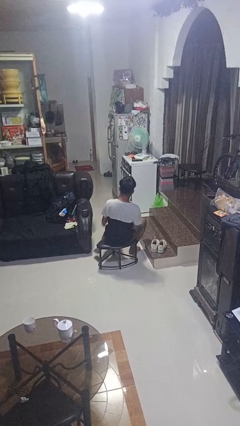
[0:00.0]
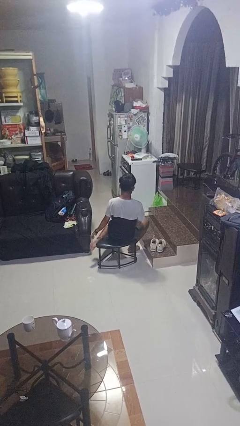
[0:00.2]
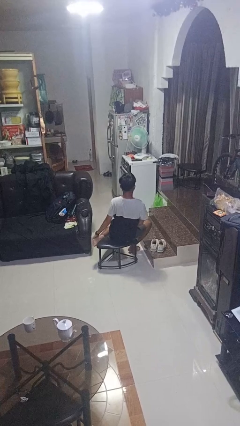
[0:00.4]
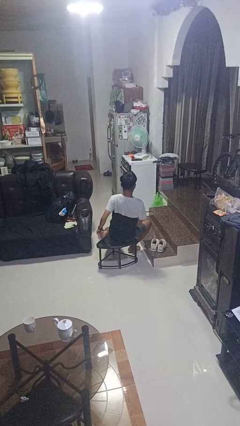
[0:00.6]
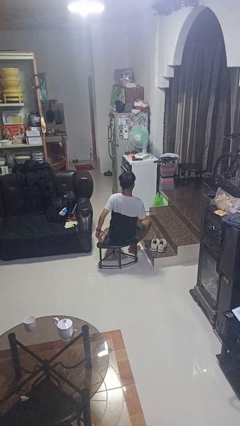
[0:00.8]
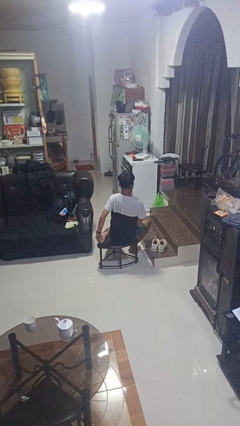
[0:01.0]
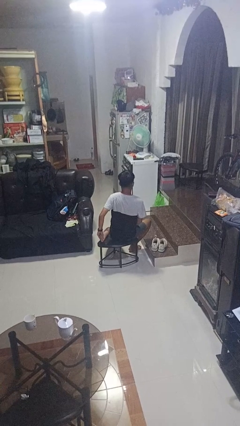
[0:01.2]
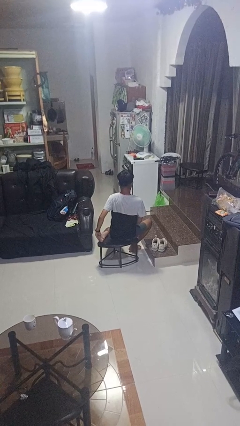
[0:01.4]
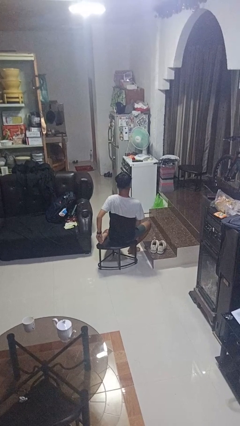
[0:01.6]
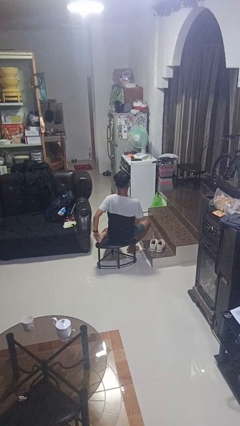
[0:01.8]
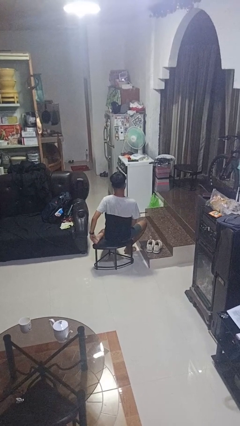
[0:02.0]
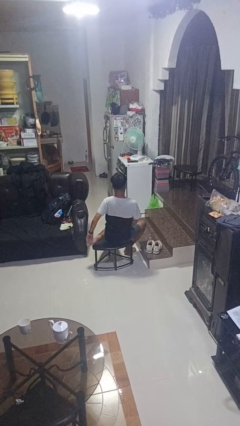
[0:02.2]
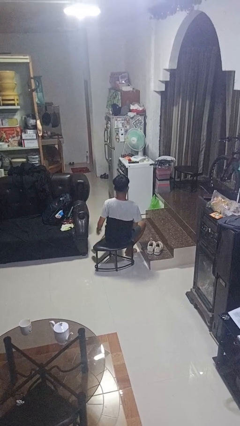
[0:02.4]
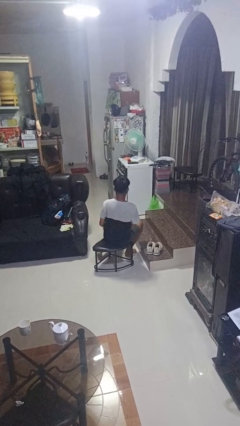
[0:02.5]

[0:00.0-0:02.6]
person rubs foot

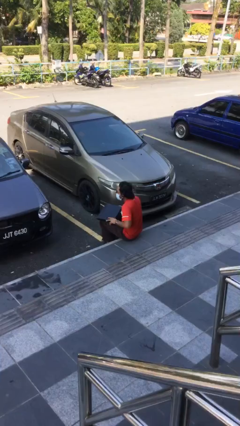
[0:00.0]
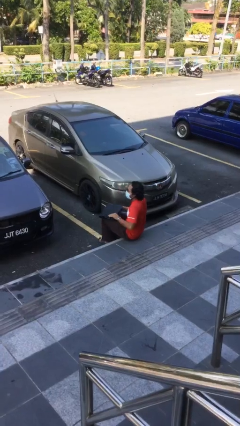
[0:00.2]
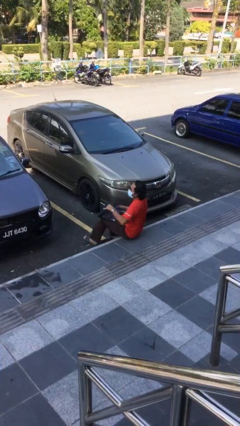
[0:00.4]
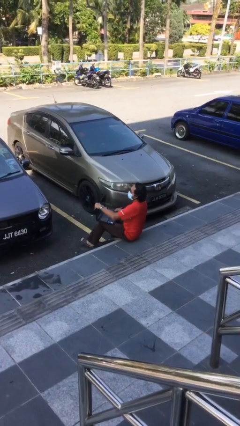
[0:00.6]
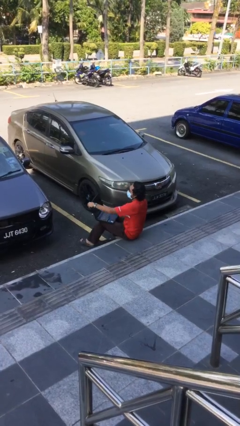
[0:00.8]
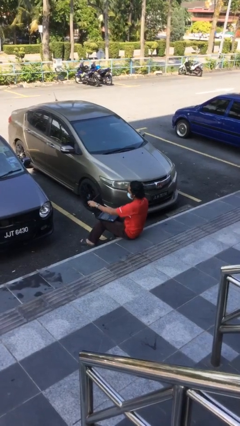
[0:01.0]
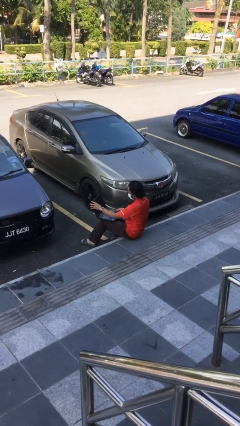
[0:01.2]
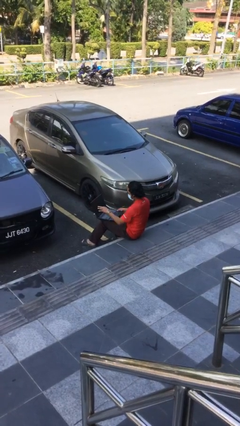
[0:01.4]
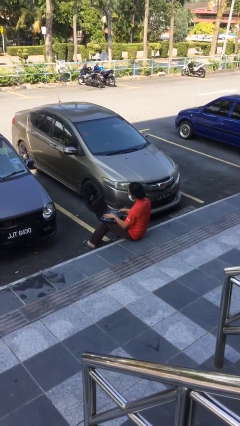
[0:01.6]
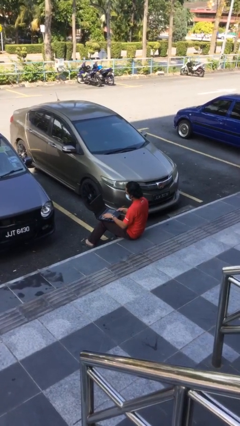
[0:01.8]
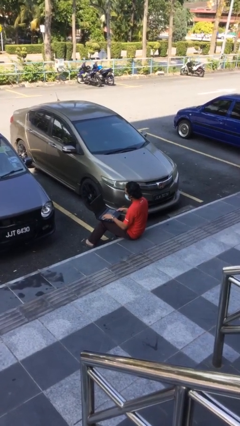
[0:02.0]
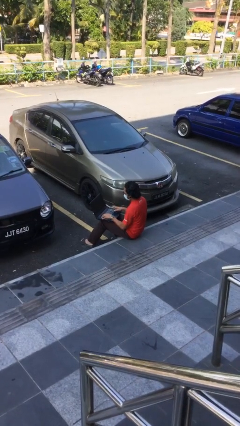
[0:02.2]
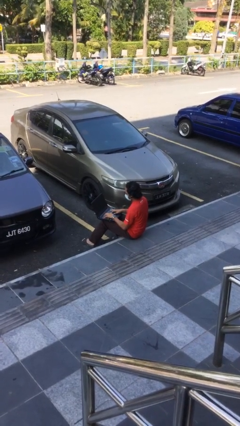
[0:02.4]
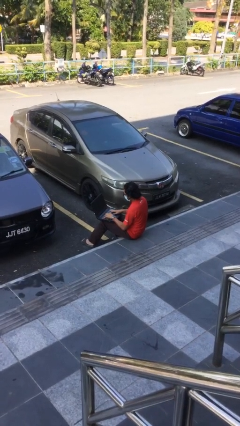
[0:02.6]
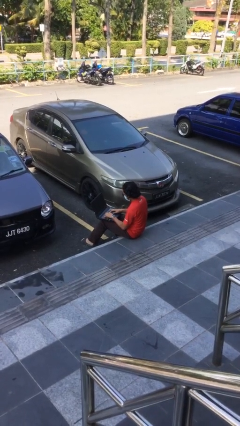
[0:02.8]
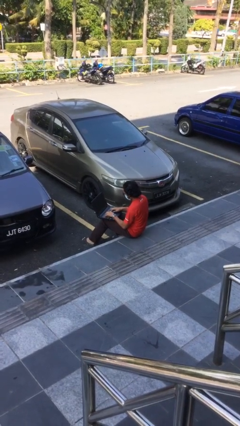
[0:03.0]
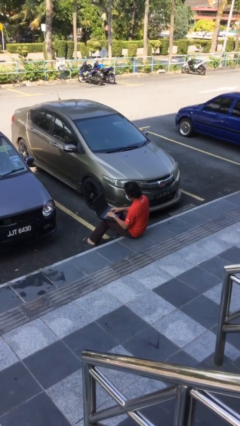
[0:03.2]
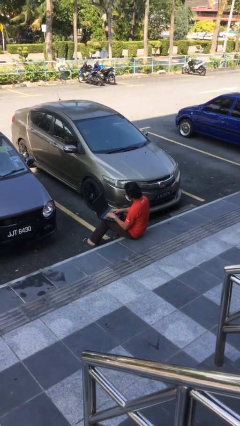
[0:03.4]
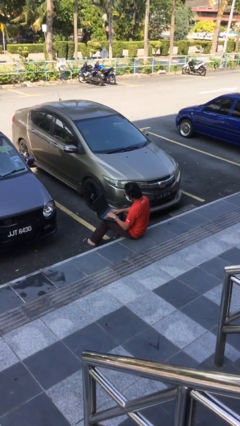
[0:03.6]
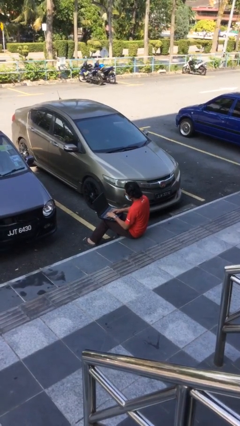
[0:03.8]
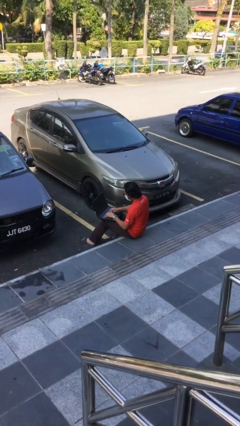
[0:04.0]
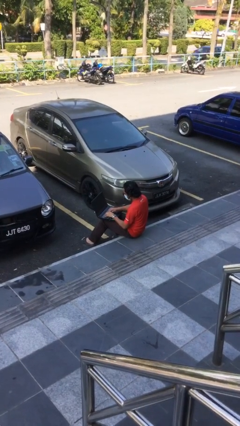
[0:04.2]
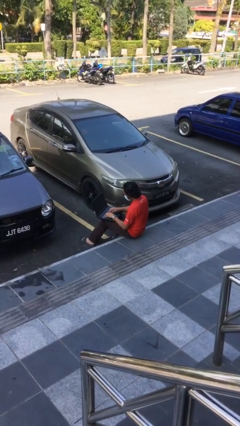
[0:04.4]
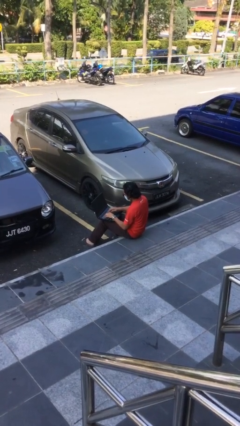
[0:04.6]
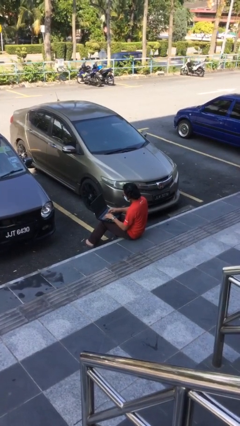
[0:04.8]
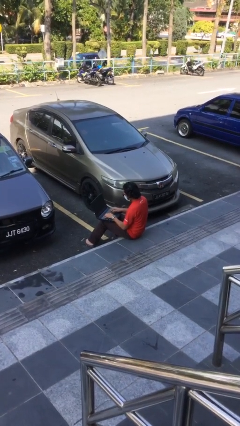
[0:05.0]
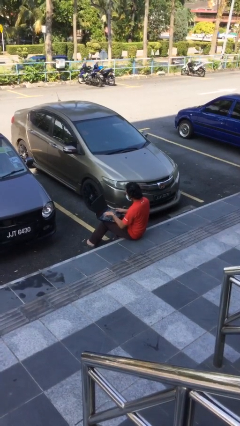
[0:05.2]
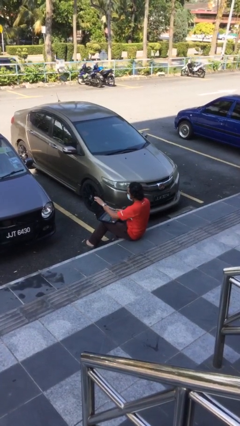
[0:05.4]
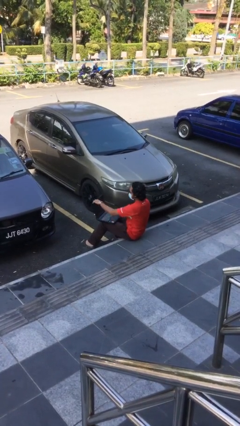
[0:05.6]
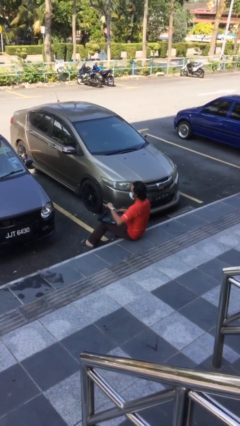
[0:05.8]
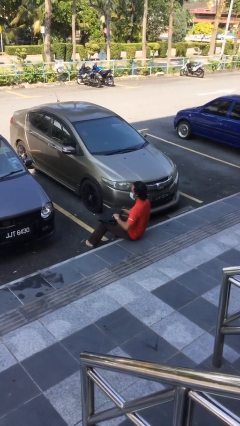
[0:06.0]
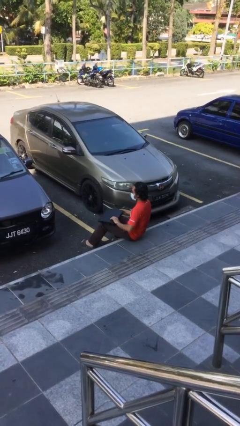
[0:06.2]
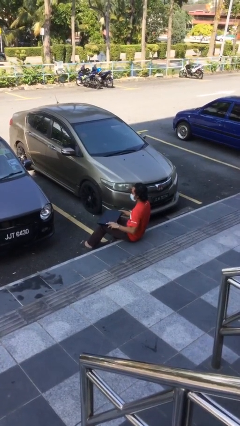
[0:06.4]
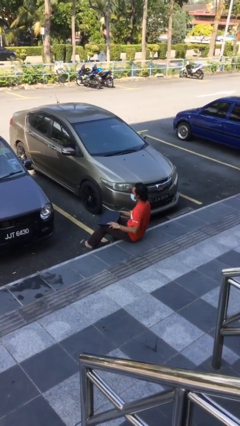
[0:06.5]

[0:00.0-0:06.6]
person interacts with laptop

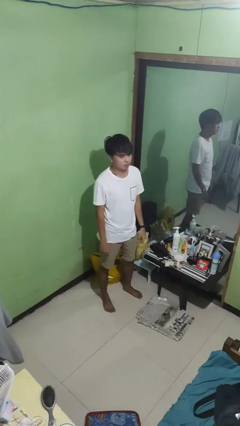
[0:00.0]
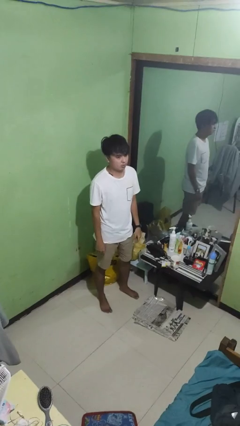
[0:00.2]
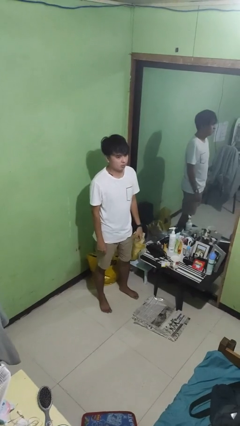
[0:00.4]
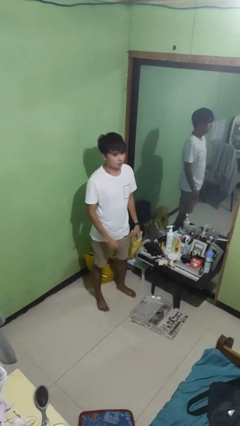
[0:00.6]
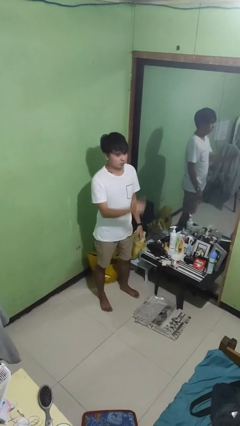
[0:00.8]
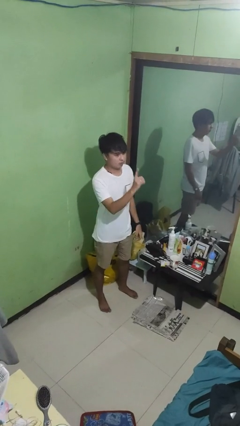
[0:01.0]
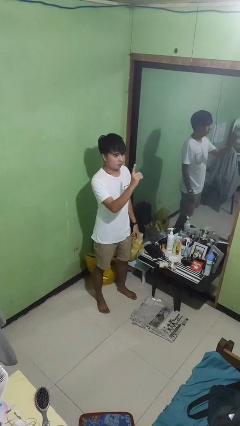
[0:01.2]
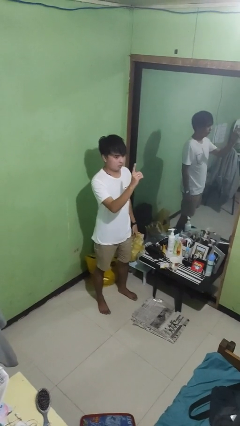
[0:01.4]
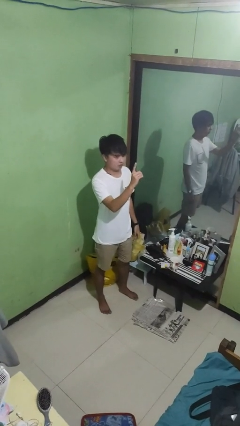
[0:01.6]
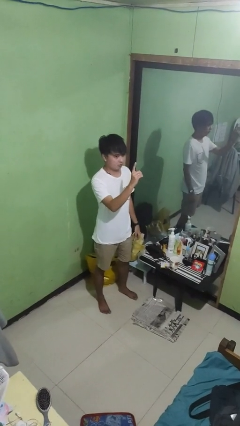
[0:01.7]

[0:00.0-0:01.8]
person gestures number one

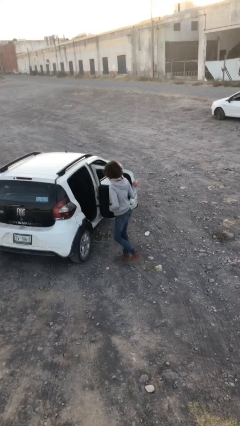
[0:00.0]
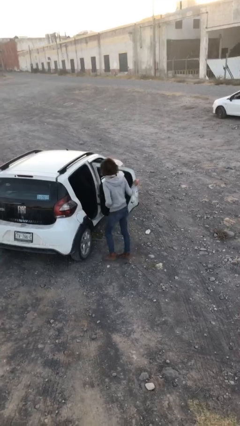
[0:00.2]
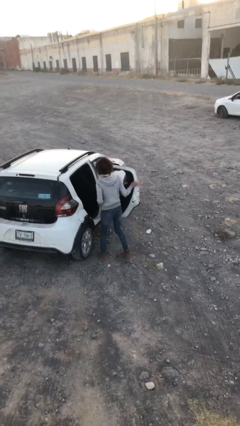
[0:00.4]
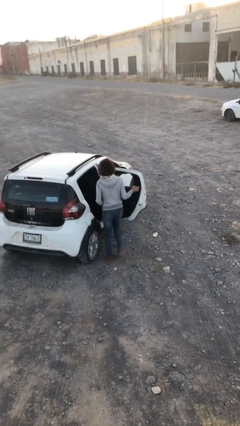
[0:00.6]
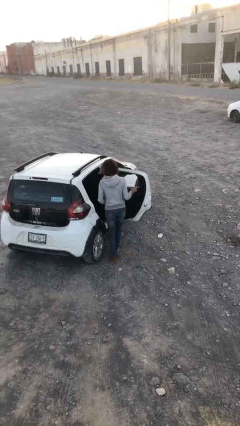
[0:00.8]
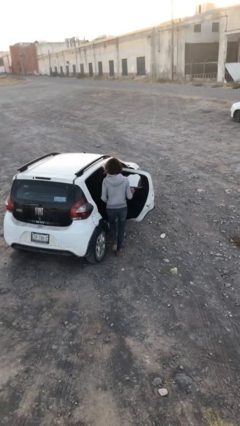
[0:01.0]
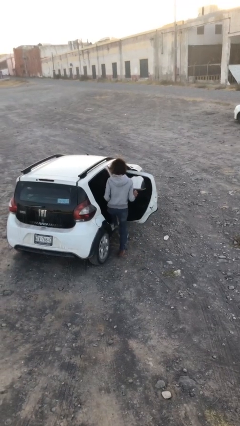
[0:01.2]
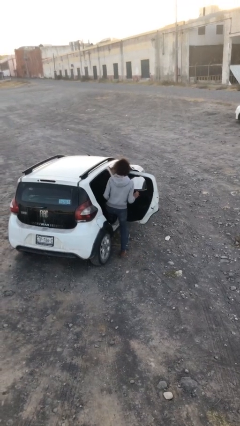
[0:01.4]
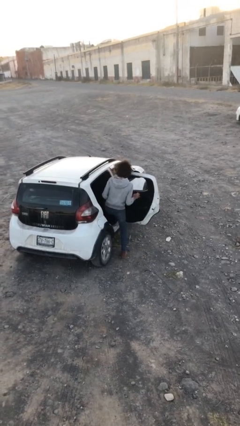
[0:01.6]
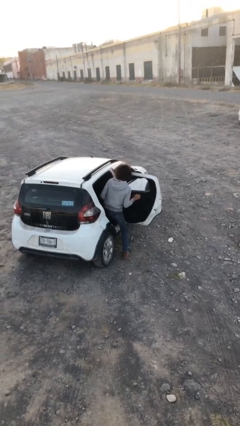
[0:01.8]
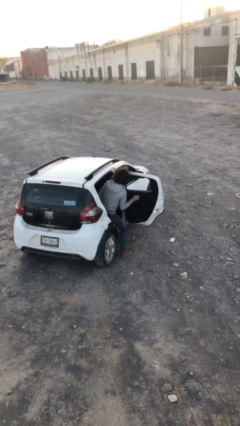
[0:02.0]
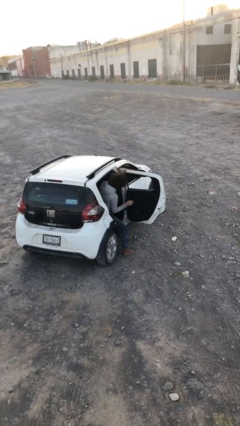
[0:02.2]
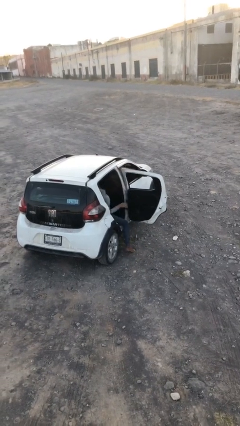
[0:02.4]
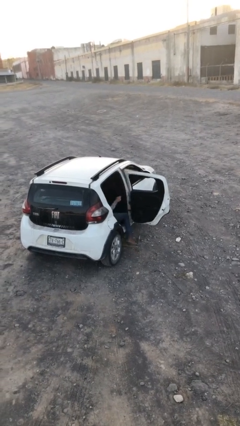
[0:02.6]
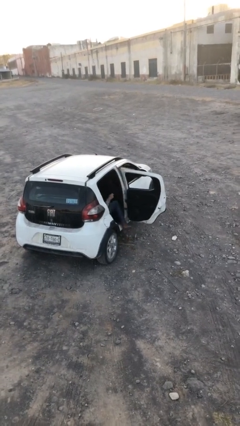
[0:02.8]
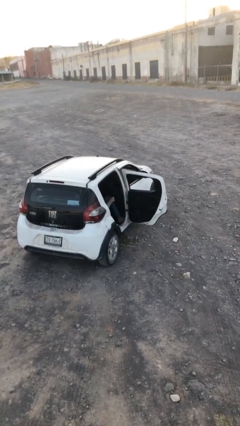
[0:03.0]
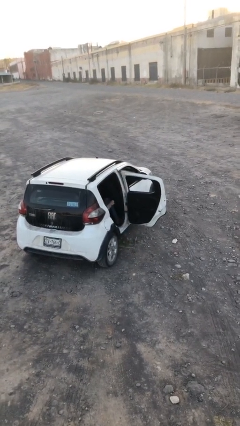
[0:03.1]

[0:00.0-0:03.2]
person enters car

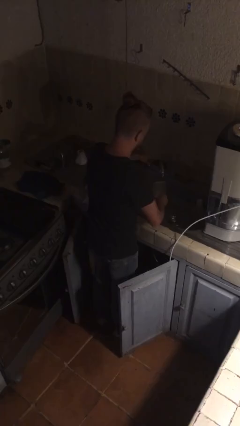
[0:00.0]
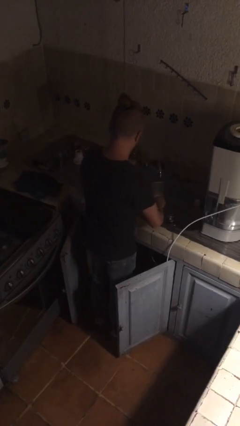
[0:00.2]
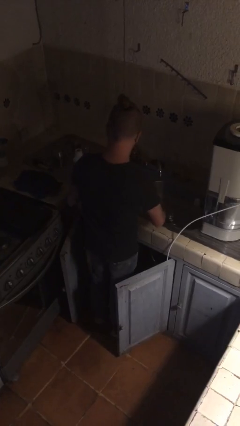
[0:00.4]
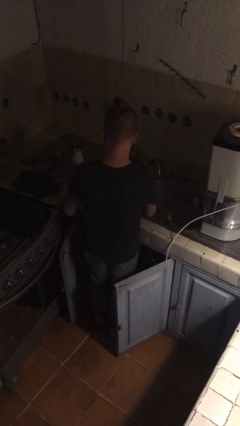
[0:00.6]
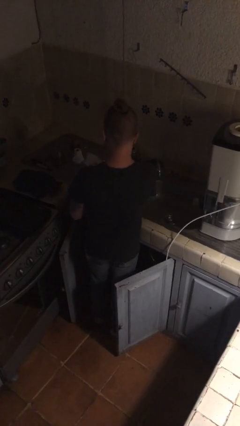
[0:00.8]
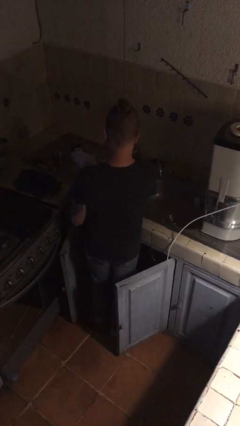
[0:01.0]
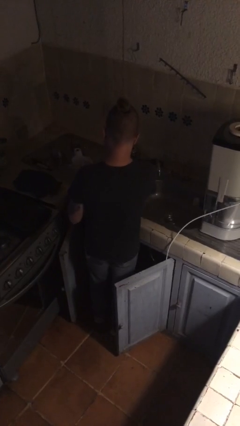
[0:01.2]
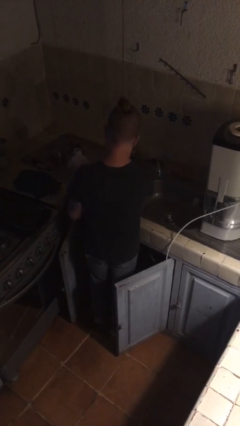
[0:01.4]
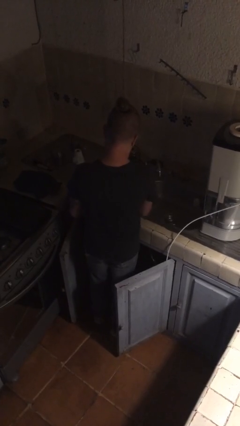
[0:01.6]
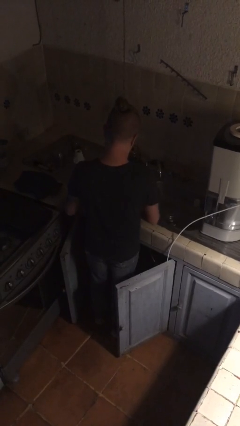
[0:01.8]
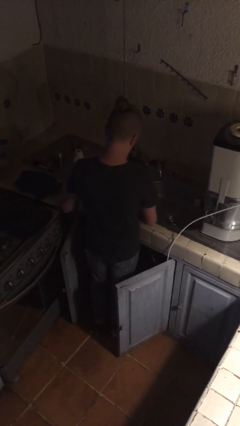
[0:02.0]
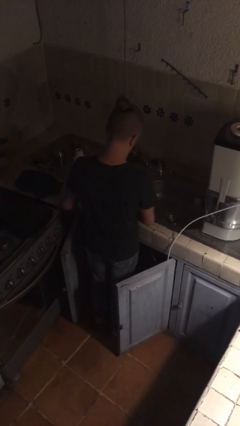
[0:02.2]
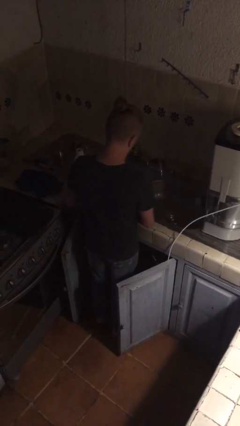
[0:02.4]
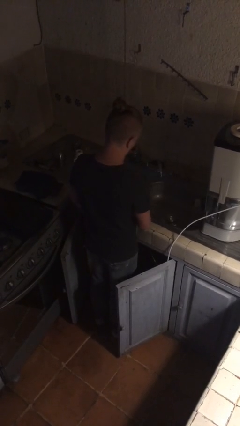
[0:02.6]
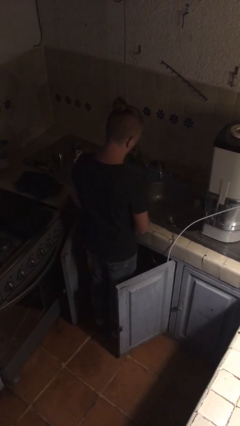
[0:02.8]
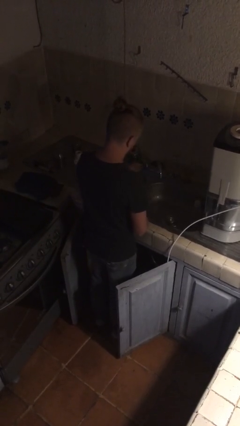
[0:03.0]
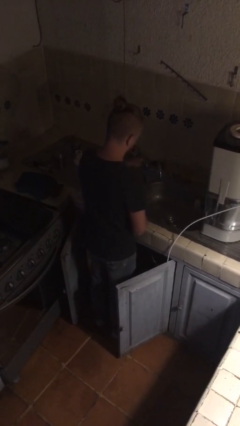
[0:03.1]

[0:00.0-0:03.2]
person dries hands with towel
